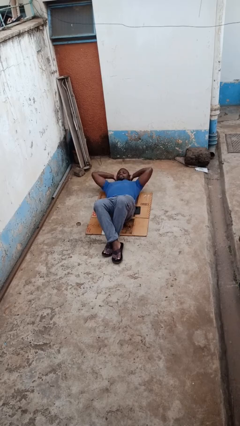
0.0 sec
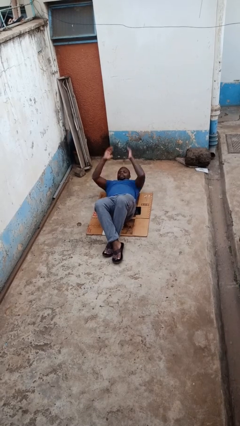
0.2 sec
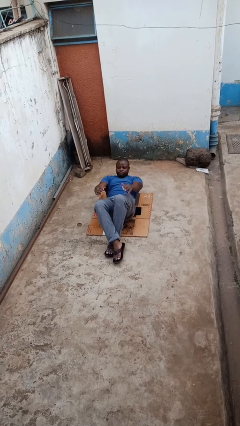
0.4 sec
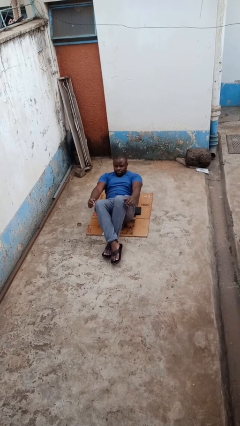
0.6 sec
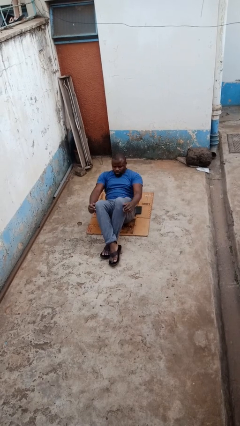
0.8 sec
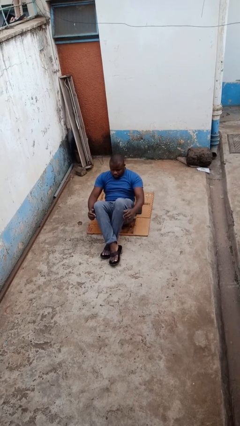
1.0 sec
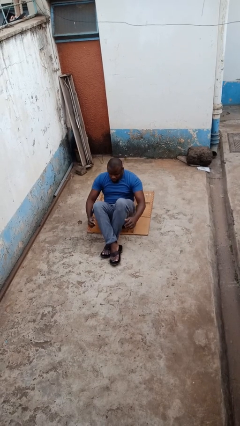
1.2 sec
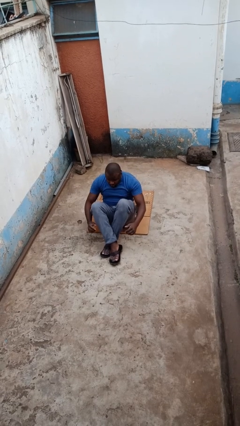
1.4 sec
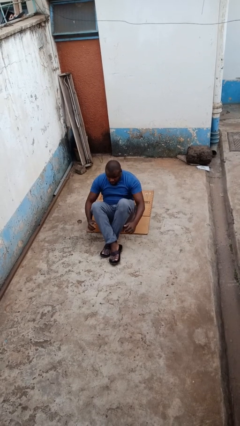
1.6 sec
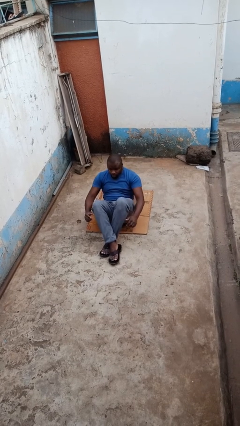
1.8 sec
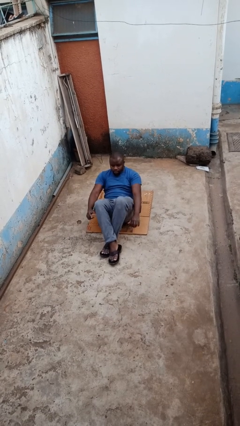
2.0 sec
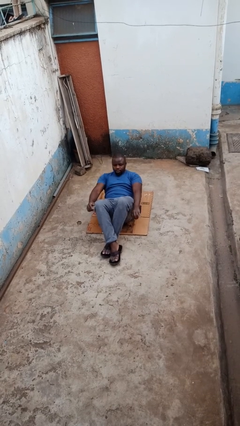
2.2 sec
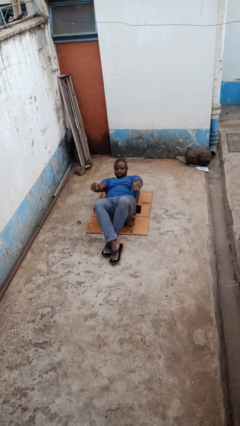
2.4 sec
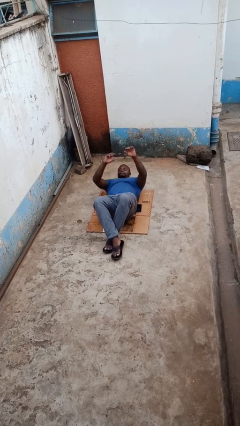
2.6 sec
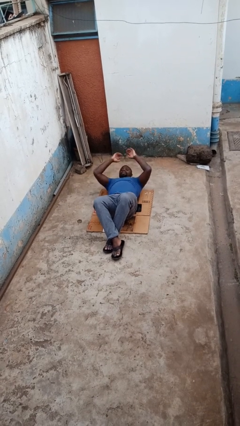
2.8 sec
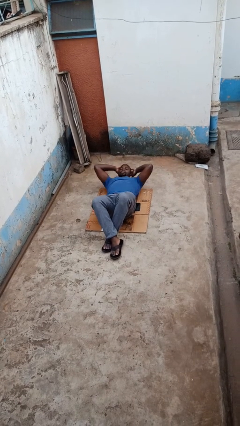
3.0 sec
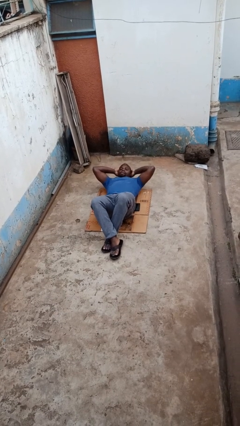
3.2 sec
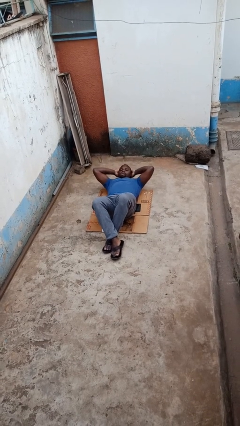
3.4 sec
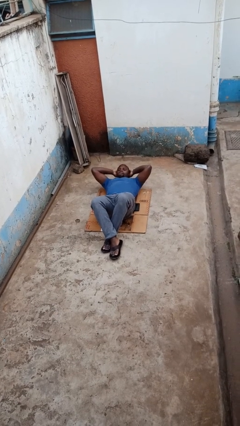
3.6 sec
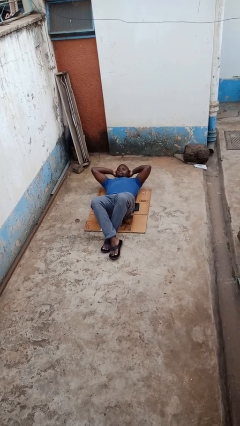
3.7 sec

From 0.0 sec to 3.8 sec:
person exercises with situp

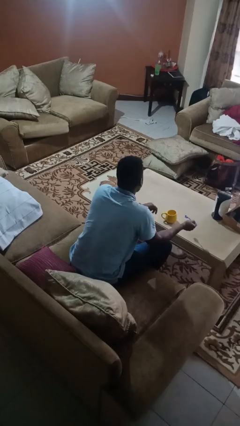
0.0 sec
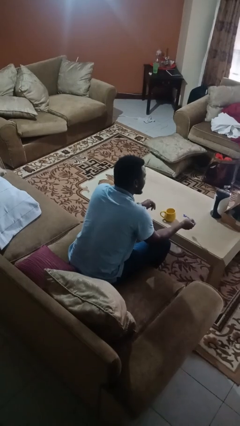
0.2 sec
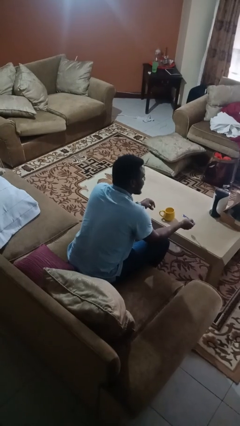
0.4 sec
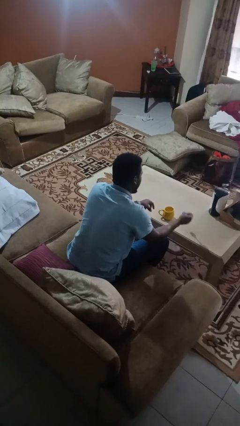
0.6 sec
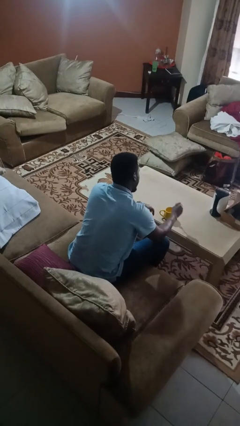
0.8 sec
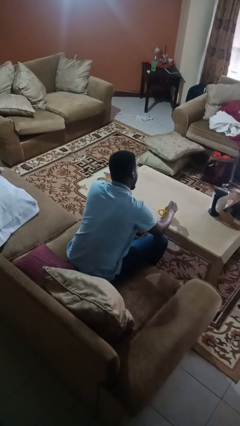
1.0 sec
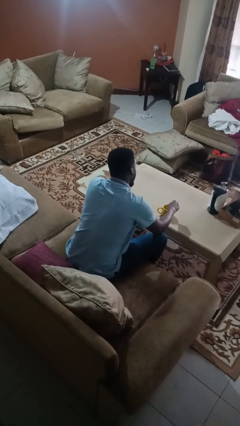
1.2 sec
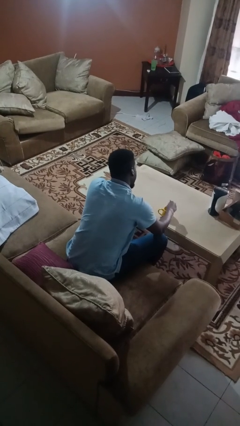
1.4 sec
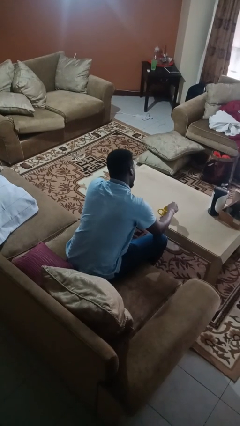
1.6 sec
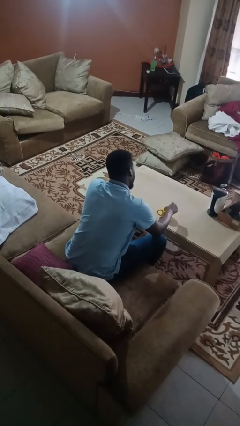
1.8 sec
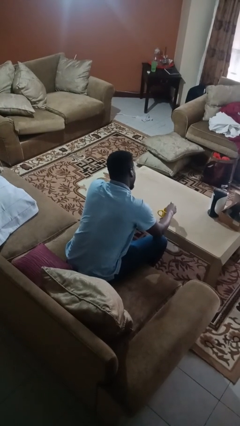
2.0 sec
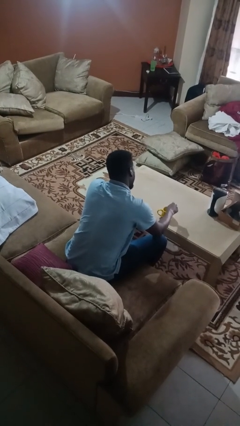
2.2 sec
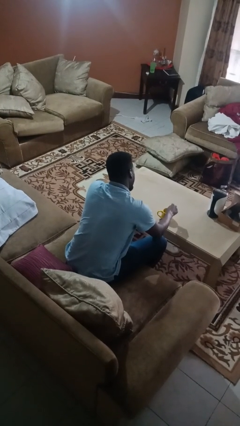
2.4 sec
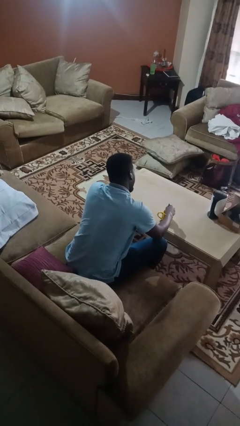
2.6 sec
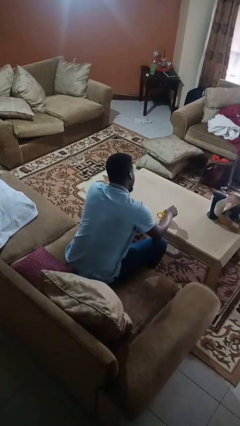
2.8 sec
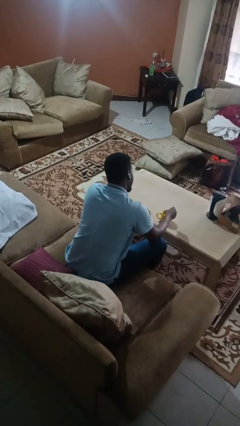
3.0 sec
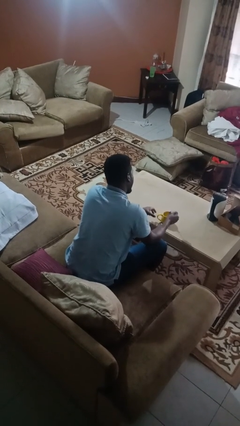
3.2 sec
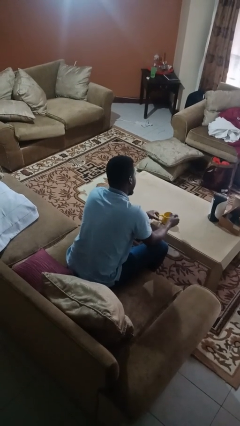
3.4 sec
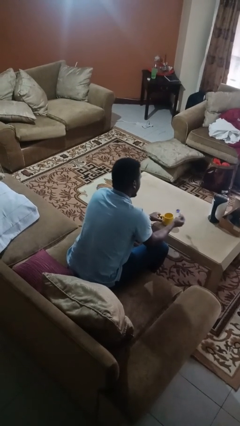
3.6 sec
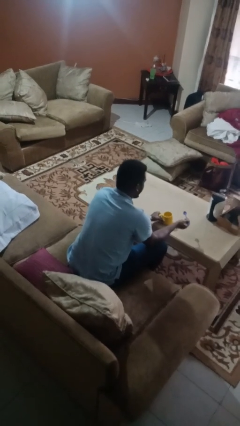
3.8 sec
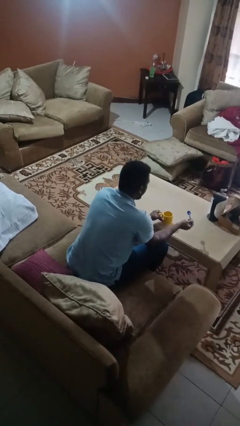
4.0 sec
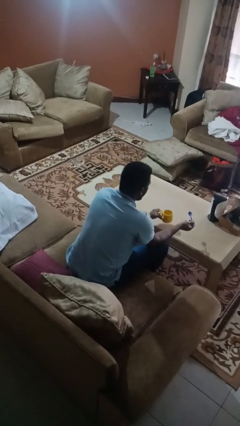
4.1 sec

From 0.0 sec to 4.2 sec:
person stirs mug

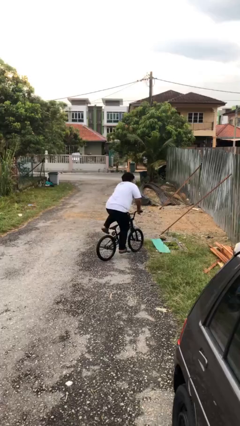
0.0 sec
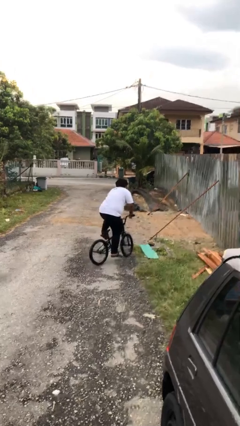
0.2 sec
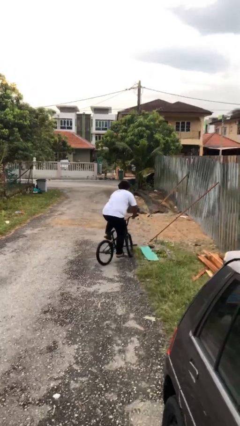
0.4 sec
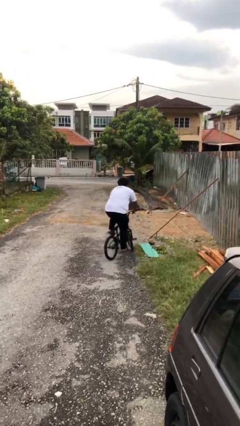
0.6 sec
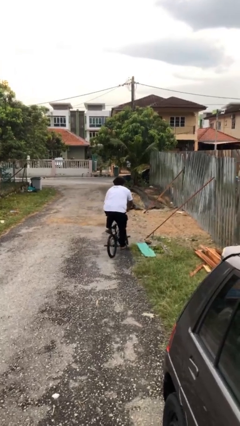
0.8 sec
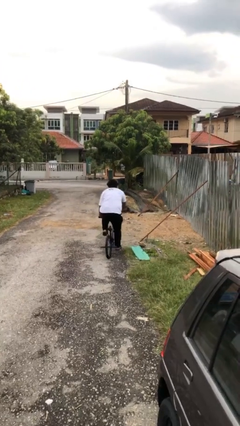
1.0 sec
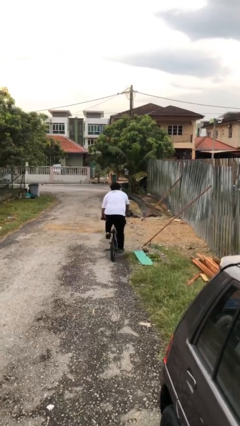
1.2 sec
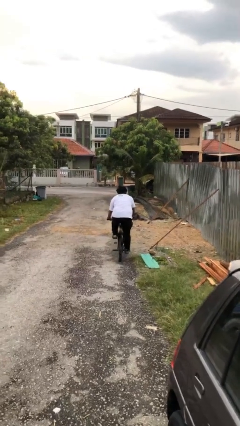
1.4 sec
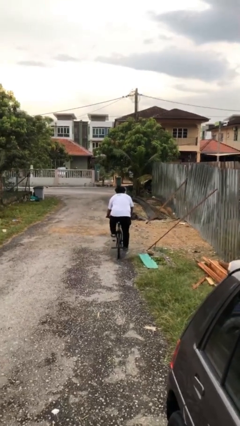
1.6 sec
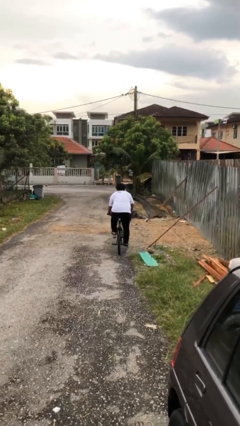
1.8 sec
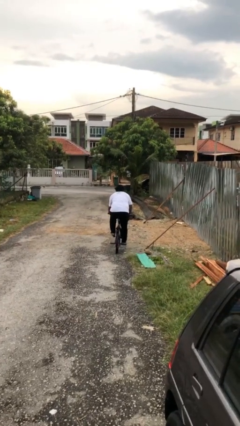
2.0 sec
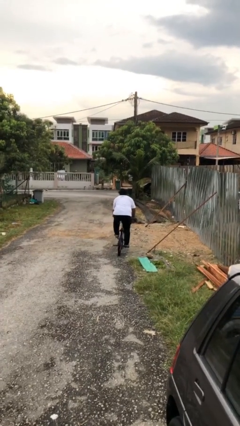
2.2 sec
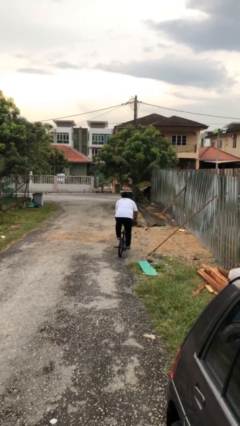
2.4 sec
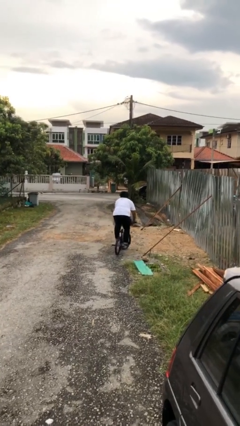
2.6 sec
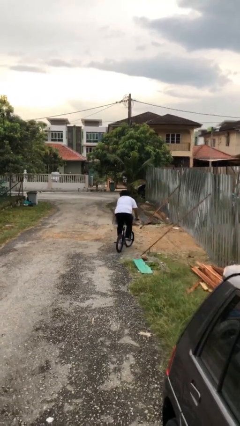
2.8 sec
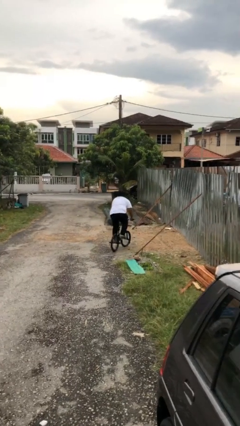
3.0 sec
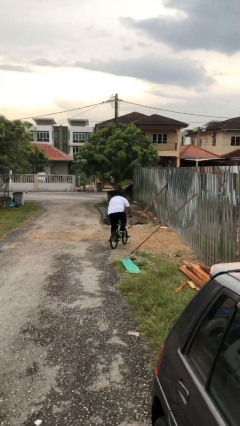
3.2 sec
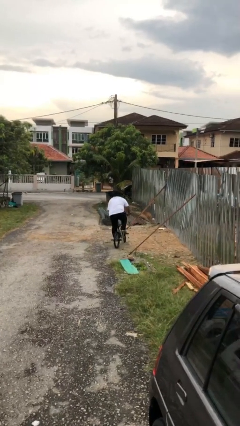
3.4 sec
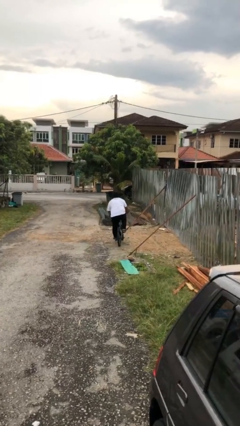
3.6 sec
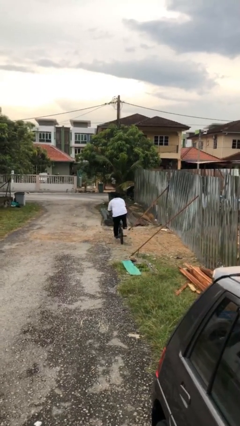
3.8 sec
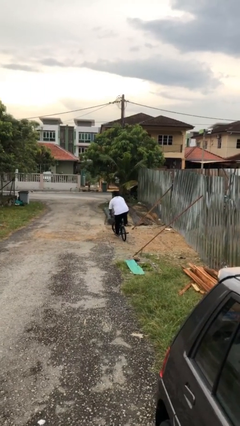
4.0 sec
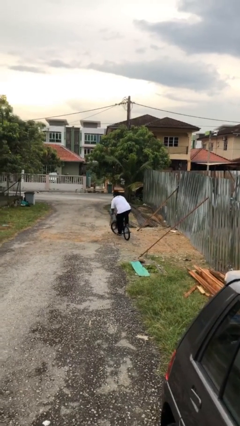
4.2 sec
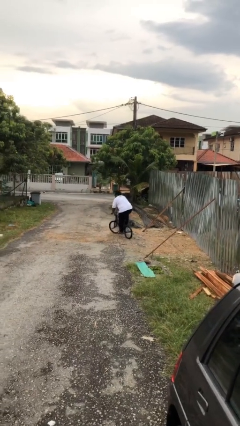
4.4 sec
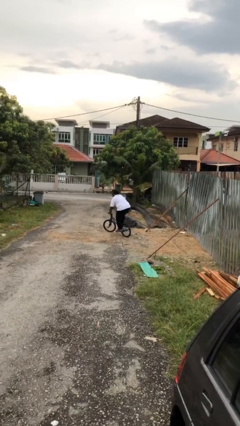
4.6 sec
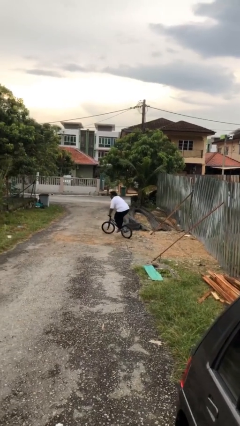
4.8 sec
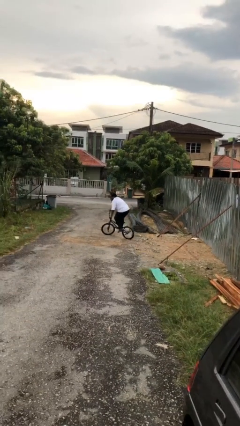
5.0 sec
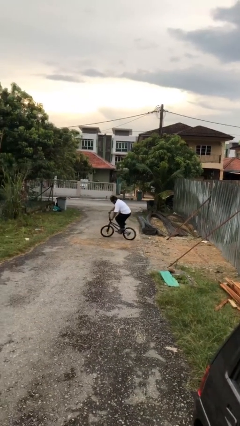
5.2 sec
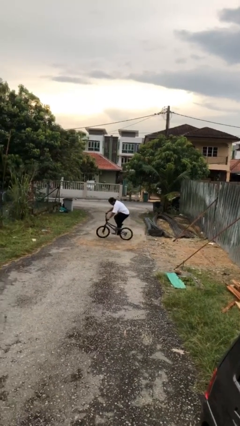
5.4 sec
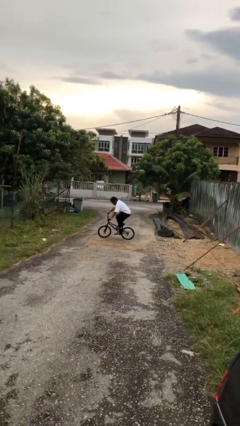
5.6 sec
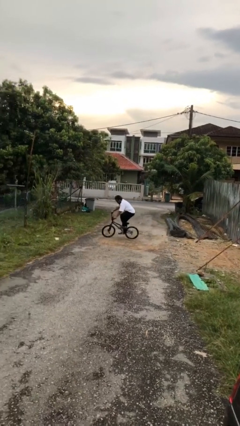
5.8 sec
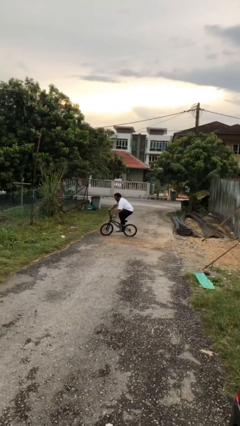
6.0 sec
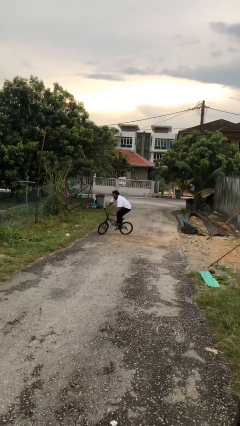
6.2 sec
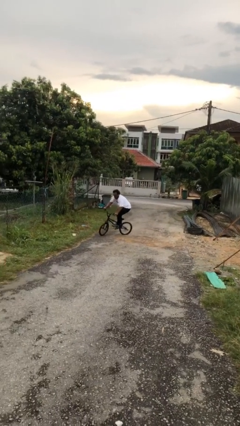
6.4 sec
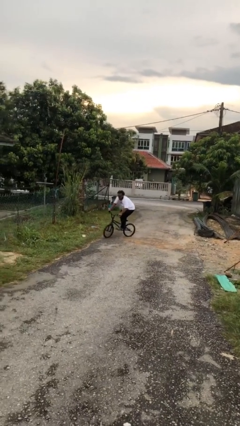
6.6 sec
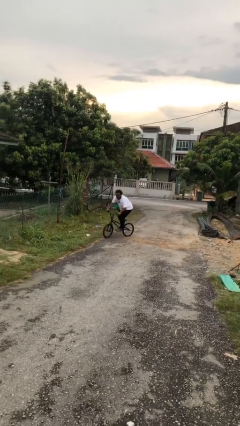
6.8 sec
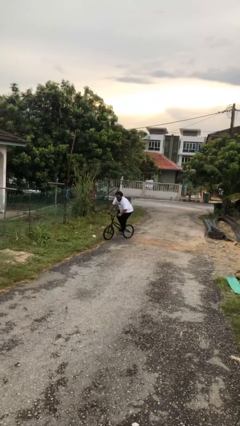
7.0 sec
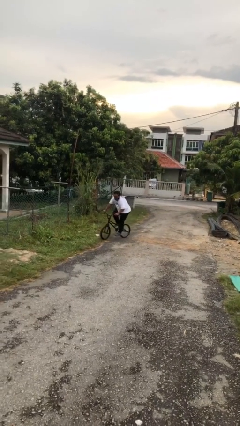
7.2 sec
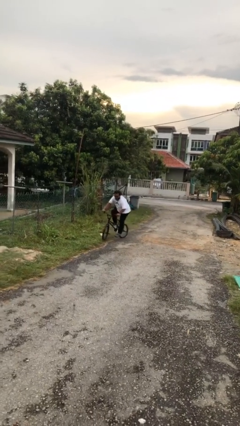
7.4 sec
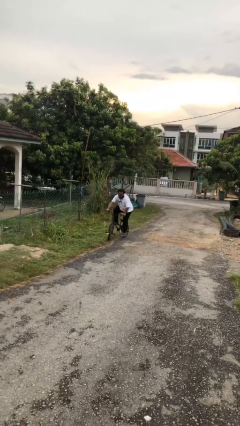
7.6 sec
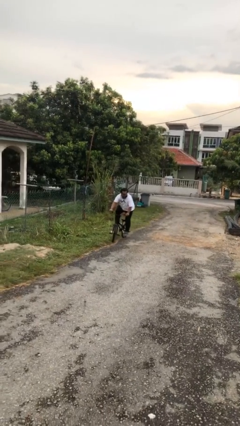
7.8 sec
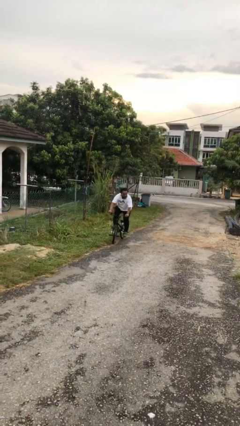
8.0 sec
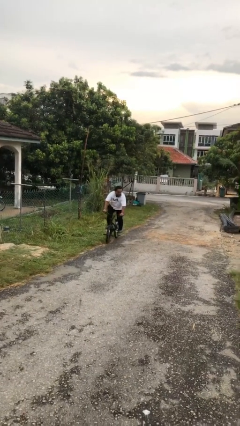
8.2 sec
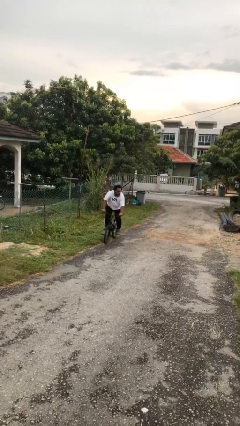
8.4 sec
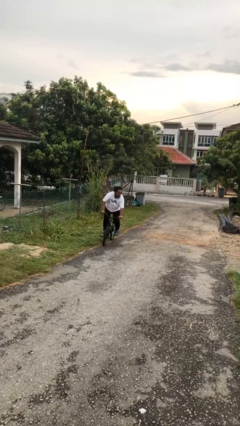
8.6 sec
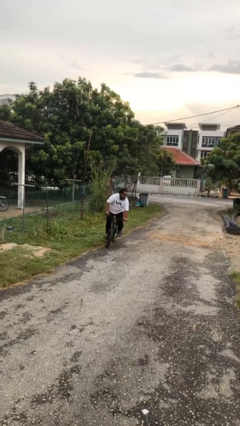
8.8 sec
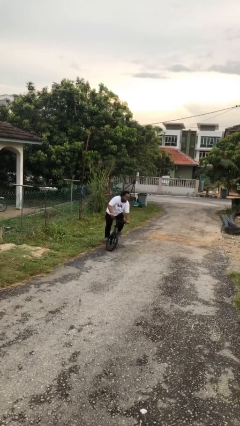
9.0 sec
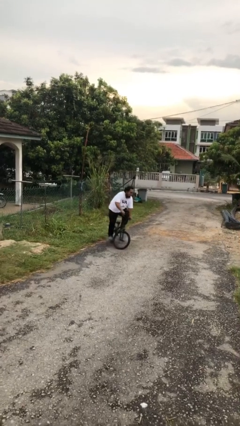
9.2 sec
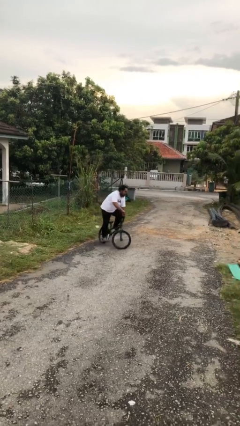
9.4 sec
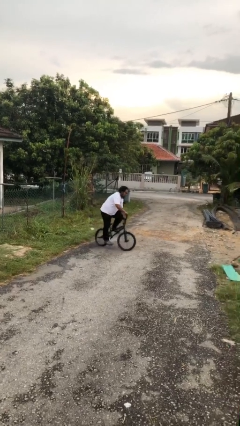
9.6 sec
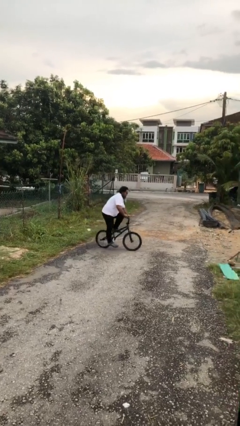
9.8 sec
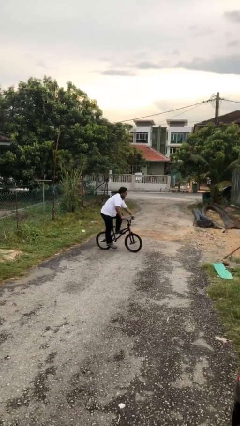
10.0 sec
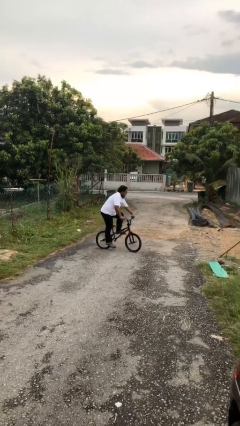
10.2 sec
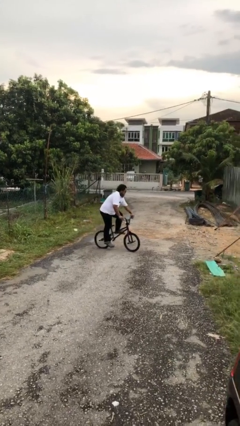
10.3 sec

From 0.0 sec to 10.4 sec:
person rides bicycle
